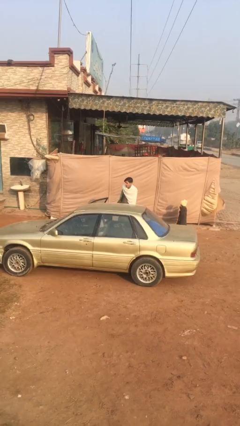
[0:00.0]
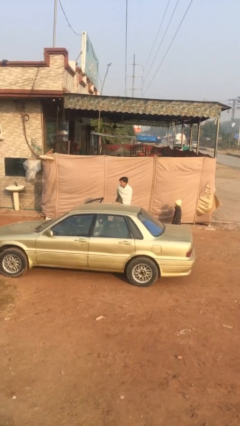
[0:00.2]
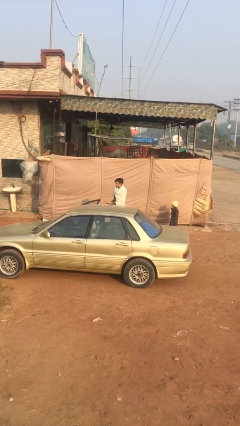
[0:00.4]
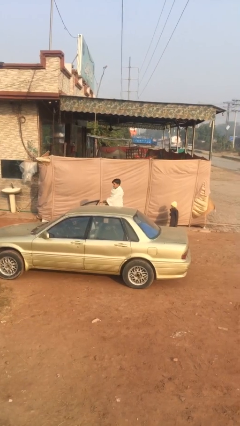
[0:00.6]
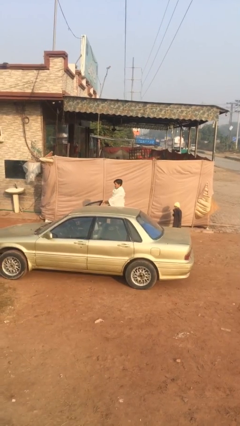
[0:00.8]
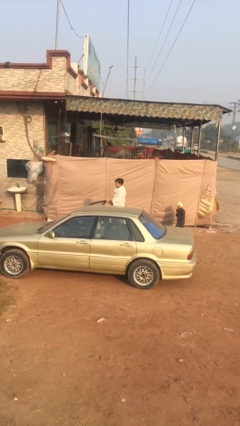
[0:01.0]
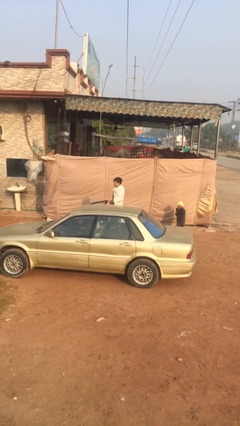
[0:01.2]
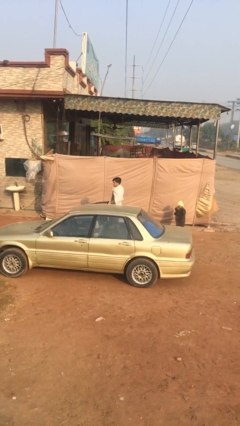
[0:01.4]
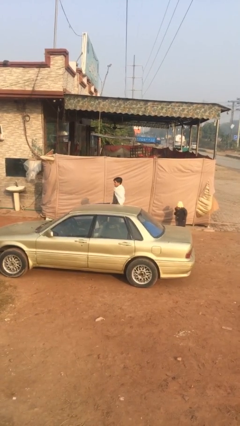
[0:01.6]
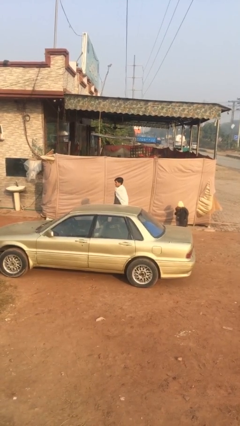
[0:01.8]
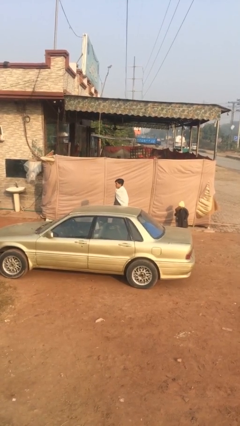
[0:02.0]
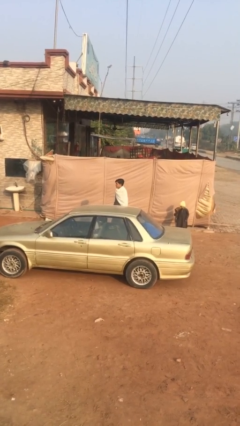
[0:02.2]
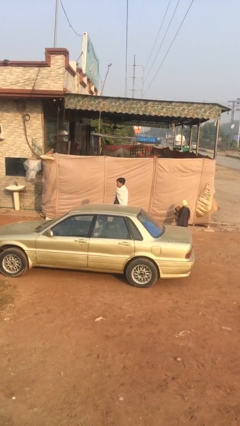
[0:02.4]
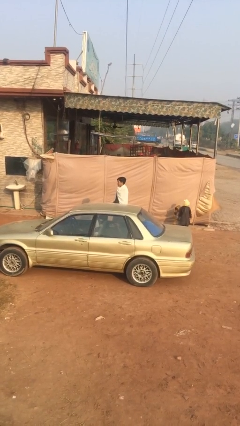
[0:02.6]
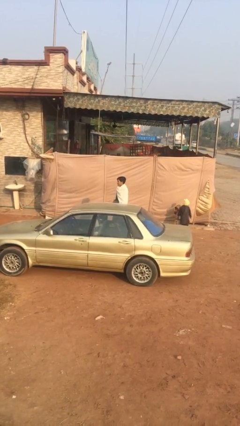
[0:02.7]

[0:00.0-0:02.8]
person closes car door

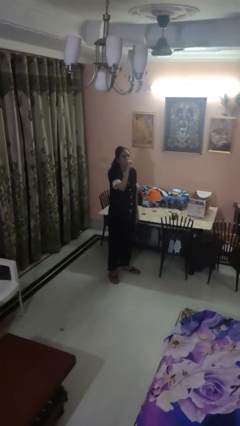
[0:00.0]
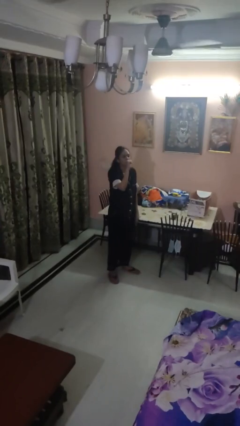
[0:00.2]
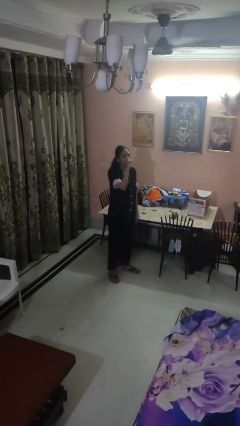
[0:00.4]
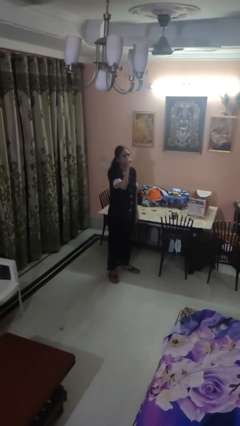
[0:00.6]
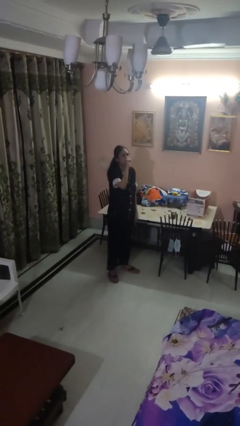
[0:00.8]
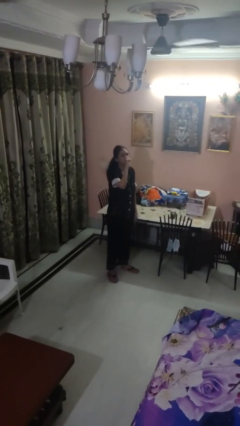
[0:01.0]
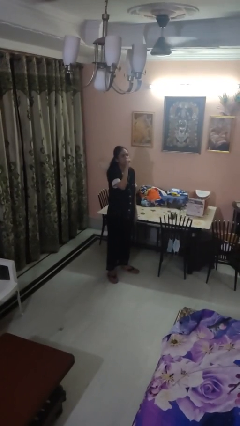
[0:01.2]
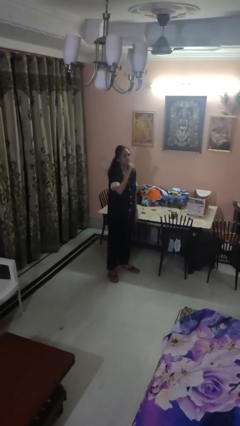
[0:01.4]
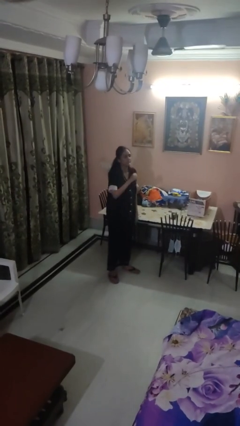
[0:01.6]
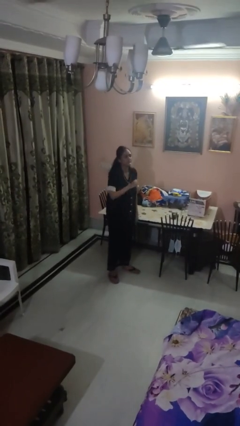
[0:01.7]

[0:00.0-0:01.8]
person vapes

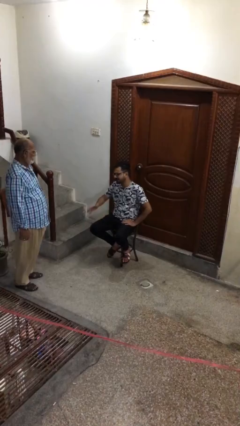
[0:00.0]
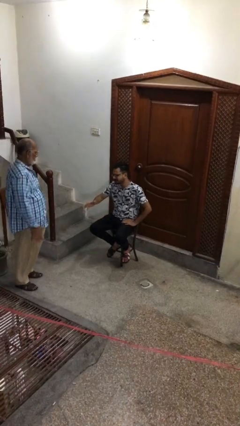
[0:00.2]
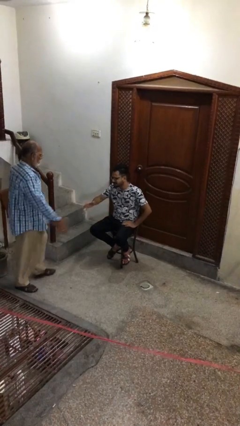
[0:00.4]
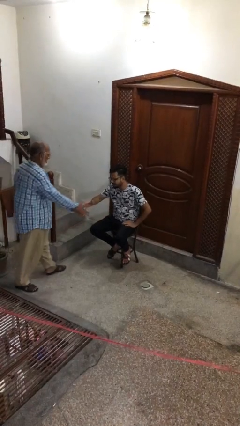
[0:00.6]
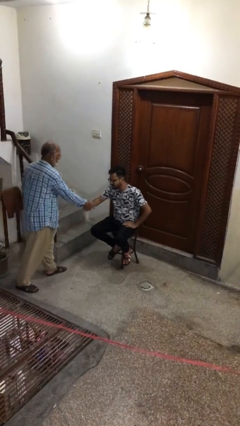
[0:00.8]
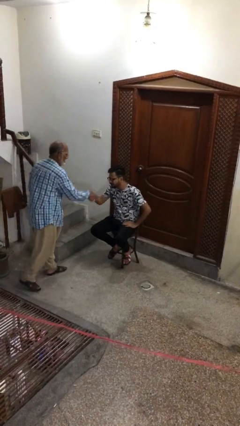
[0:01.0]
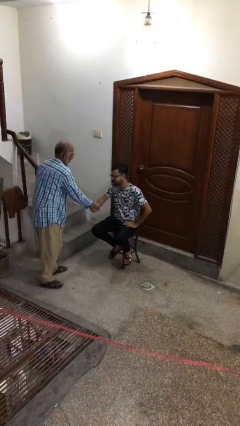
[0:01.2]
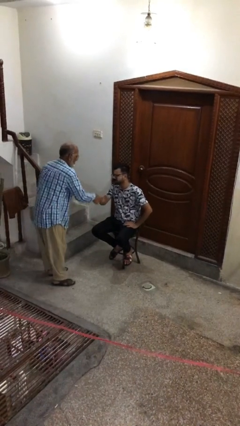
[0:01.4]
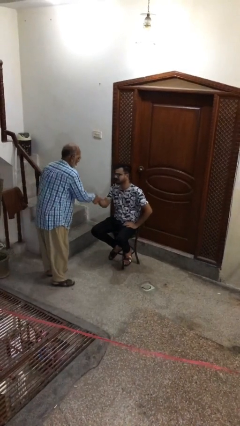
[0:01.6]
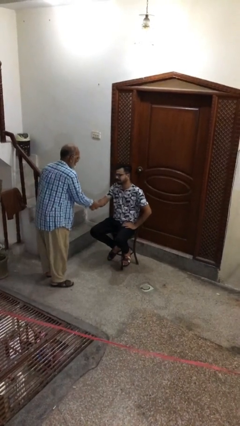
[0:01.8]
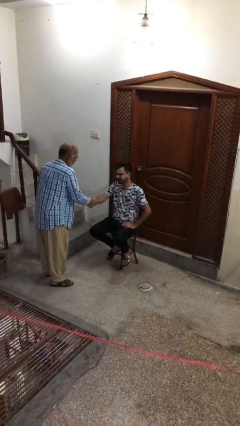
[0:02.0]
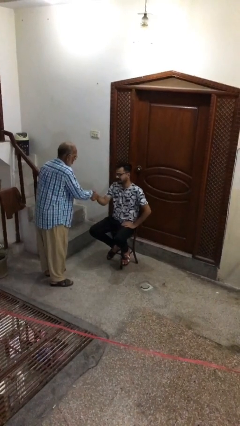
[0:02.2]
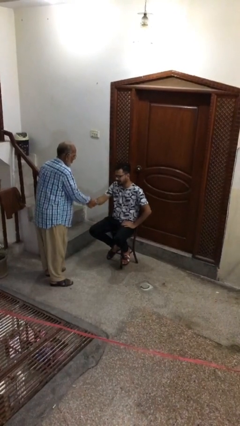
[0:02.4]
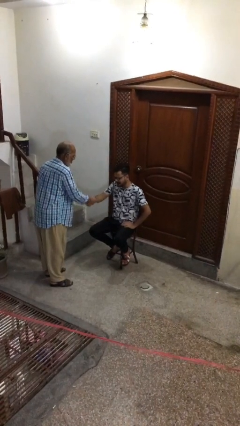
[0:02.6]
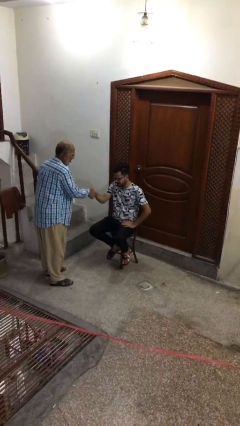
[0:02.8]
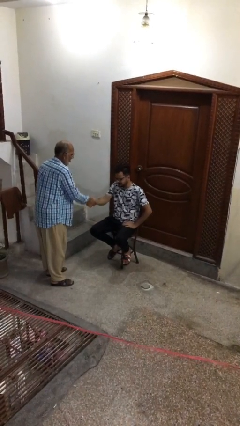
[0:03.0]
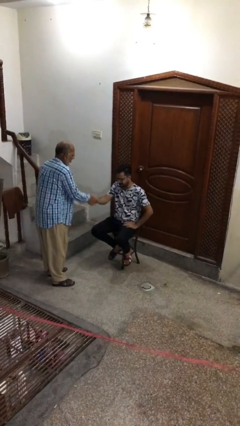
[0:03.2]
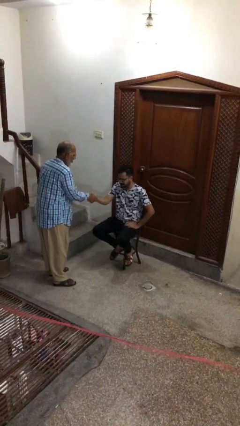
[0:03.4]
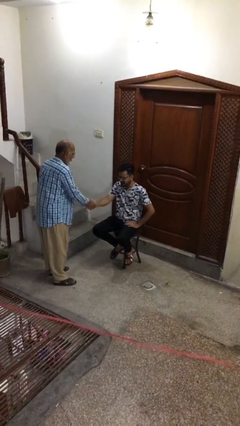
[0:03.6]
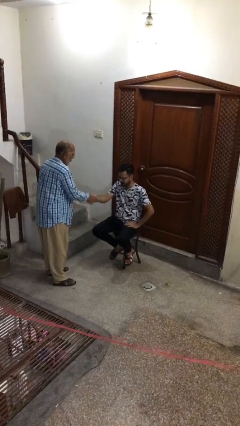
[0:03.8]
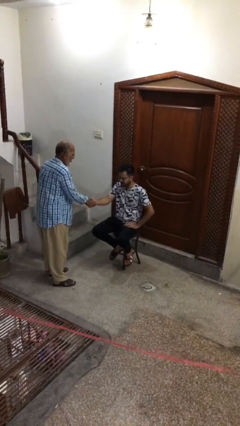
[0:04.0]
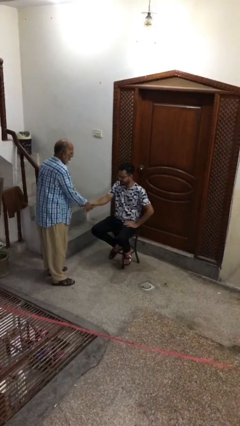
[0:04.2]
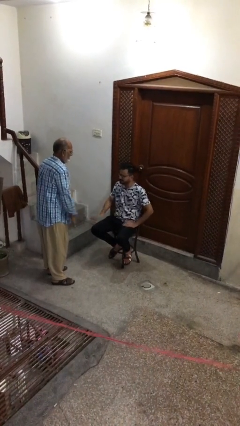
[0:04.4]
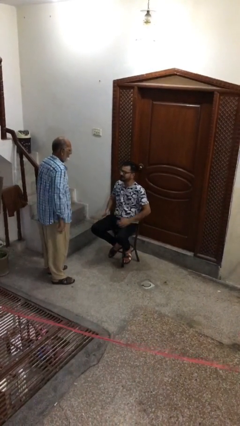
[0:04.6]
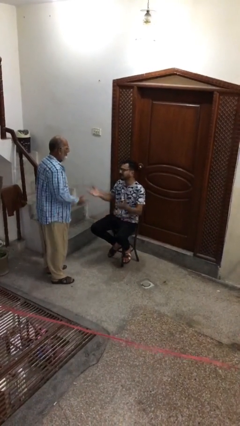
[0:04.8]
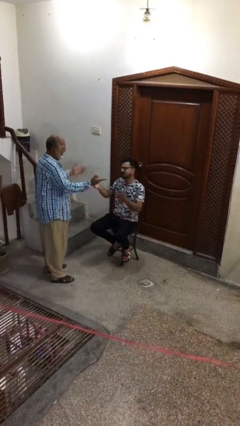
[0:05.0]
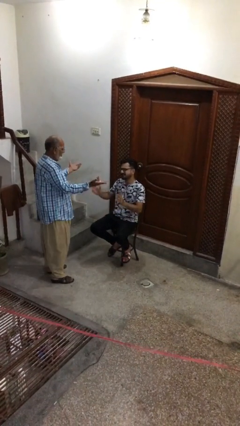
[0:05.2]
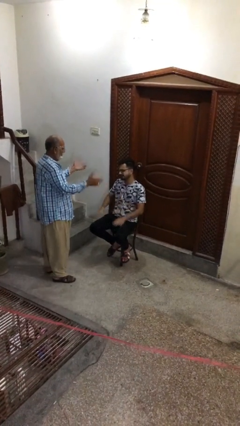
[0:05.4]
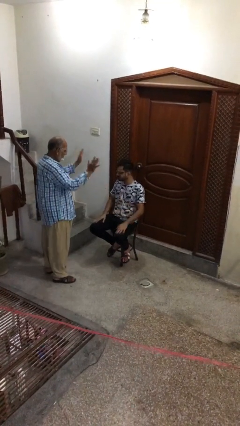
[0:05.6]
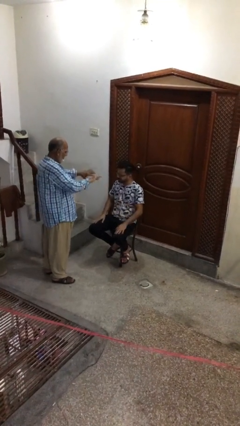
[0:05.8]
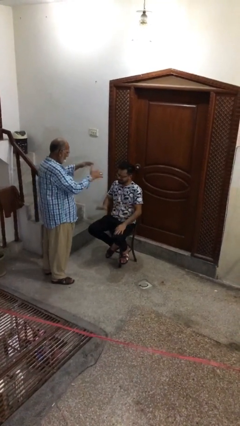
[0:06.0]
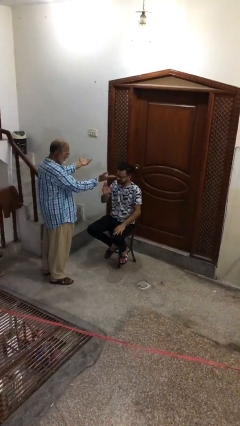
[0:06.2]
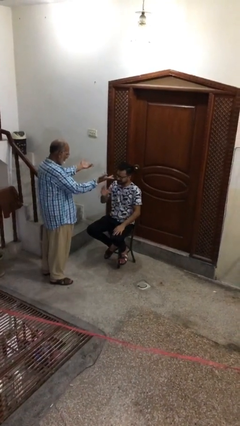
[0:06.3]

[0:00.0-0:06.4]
person shakes hand

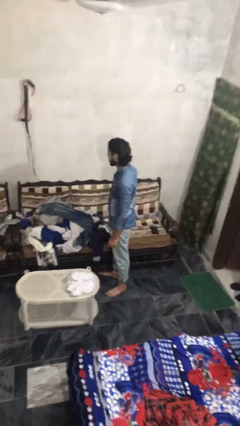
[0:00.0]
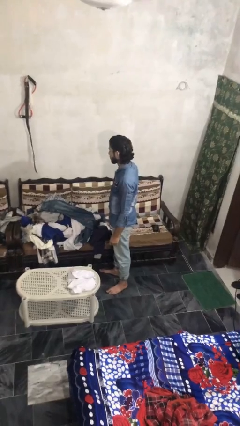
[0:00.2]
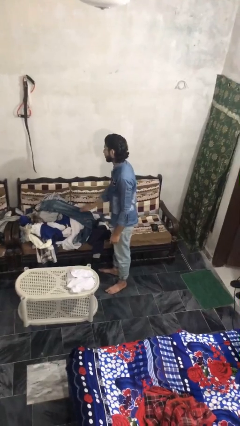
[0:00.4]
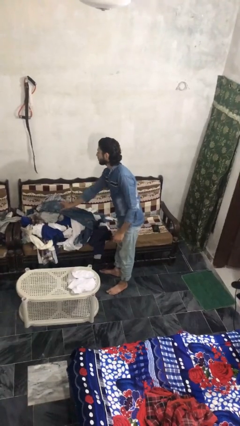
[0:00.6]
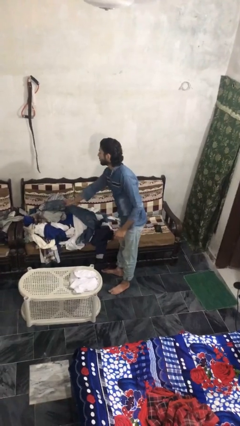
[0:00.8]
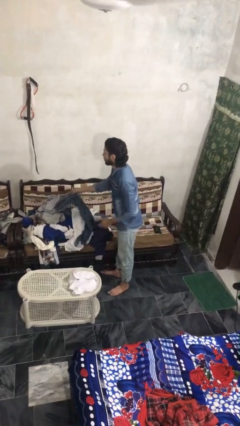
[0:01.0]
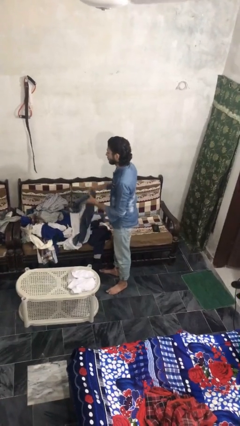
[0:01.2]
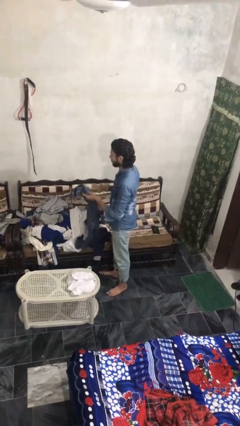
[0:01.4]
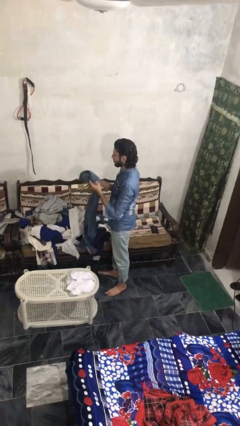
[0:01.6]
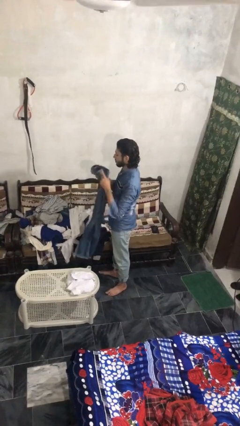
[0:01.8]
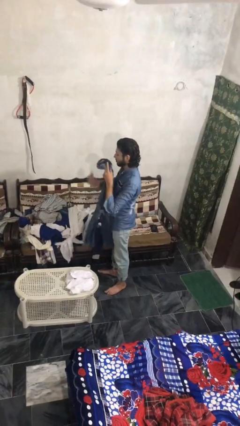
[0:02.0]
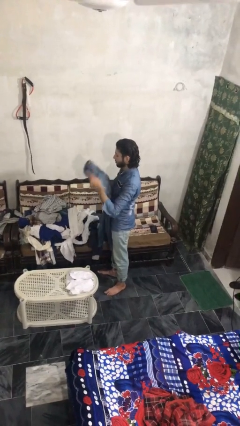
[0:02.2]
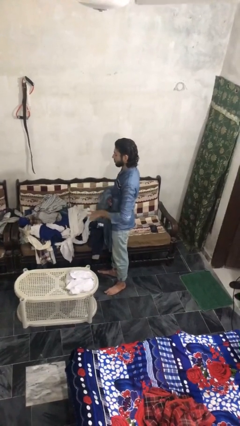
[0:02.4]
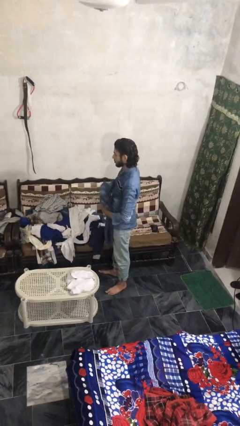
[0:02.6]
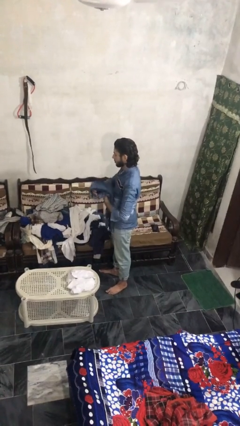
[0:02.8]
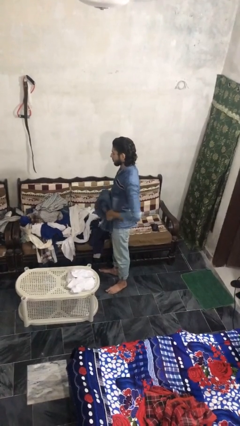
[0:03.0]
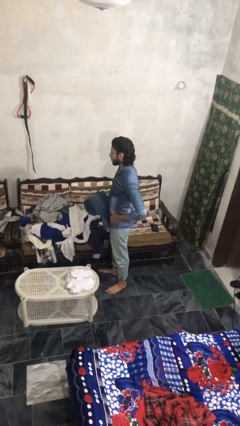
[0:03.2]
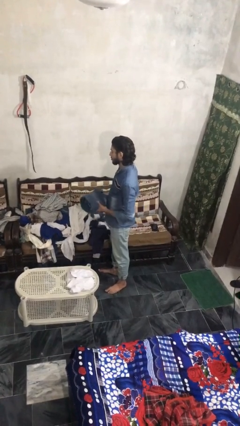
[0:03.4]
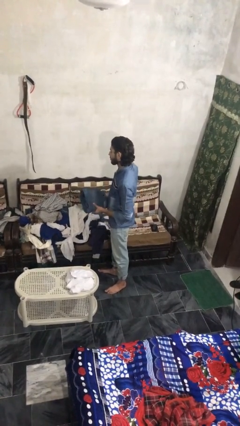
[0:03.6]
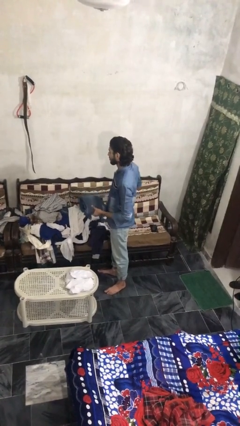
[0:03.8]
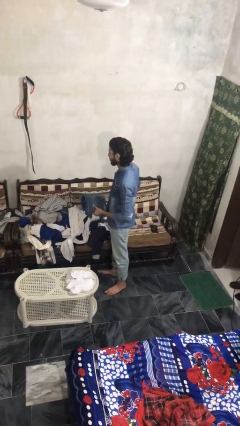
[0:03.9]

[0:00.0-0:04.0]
person folds pants

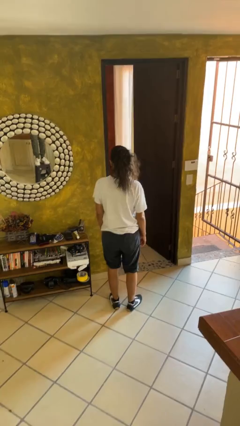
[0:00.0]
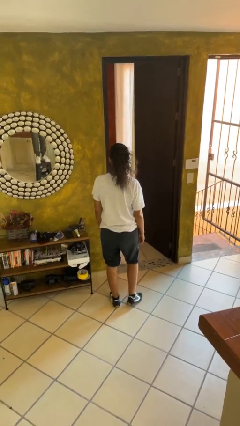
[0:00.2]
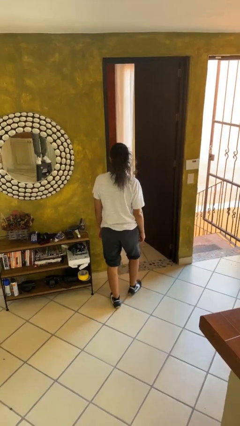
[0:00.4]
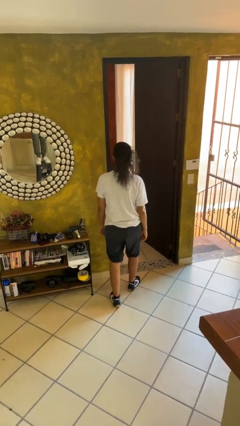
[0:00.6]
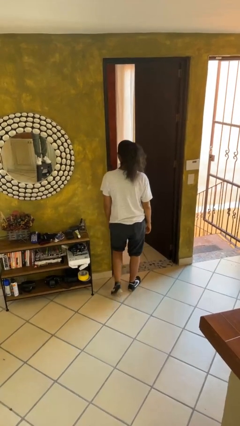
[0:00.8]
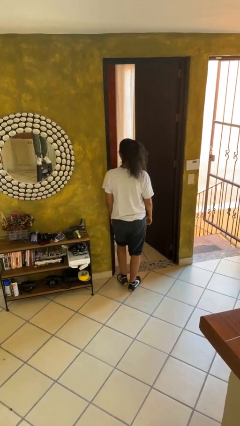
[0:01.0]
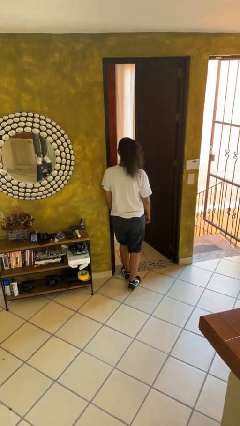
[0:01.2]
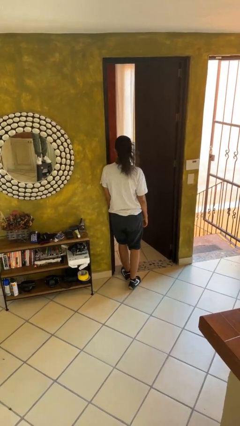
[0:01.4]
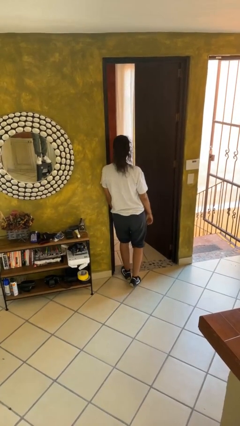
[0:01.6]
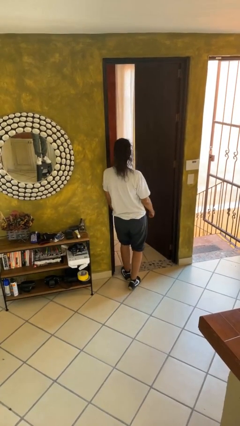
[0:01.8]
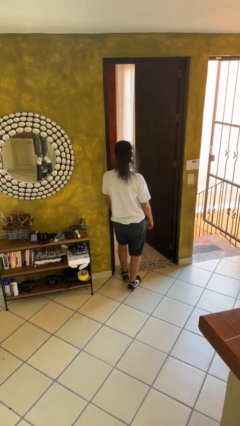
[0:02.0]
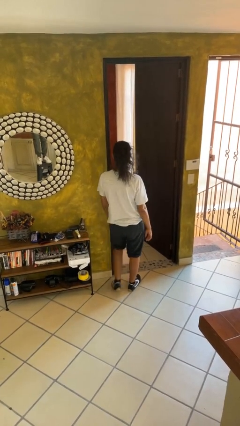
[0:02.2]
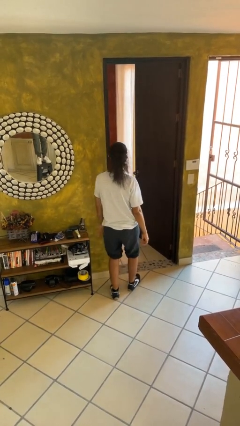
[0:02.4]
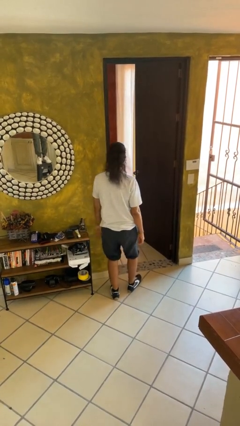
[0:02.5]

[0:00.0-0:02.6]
person bumps into wall
